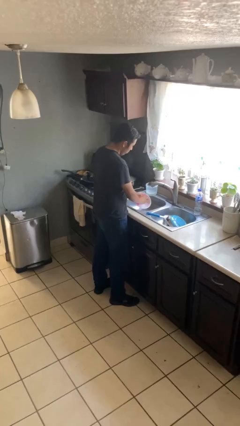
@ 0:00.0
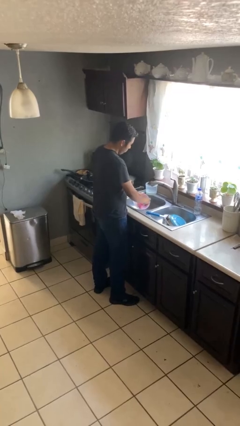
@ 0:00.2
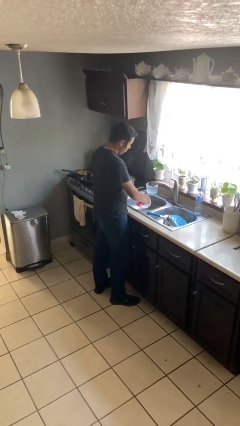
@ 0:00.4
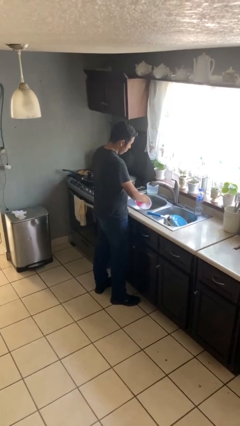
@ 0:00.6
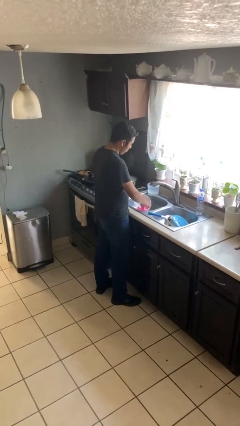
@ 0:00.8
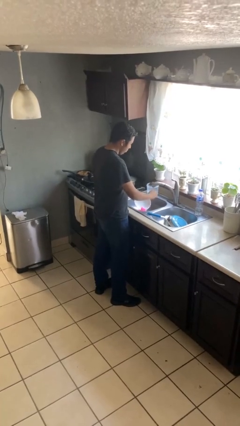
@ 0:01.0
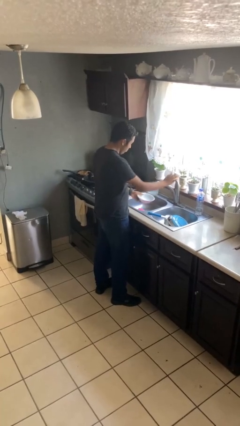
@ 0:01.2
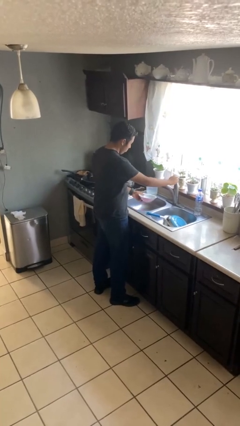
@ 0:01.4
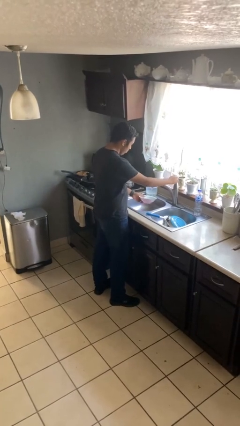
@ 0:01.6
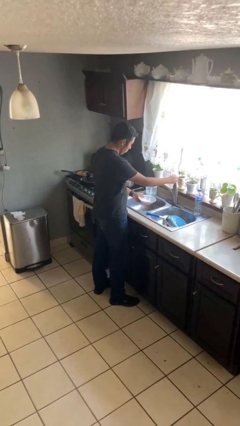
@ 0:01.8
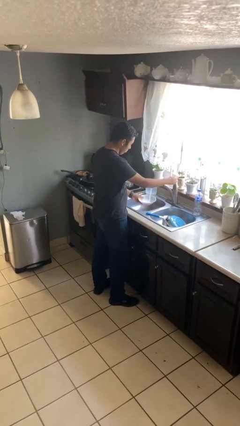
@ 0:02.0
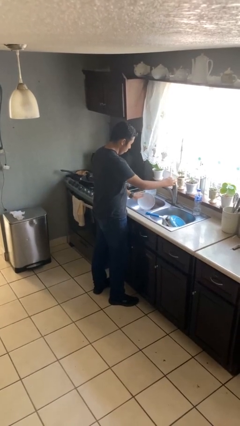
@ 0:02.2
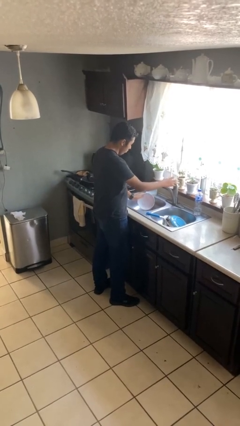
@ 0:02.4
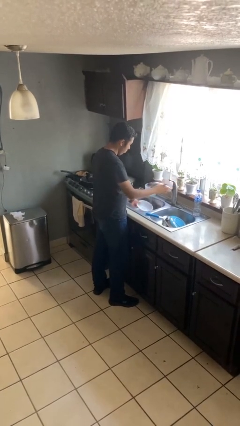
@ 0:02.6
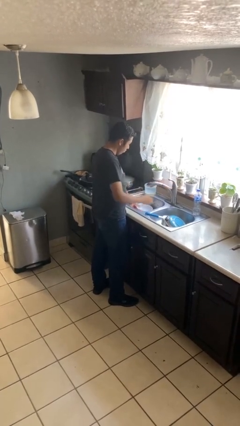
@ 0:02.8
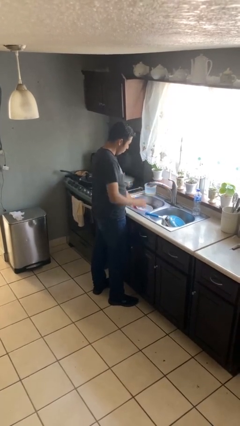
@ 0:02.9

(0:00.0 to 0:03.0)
person washes dish

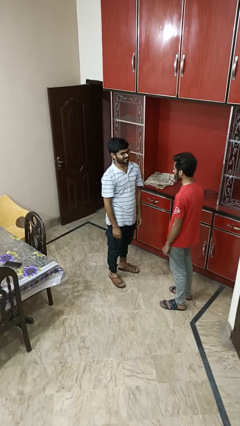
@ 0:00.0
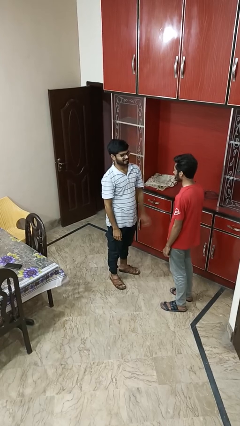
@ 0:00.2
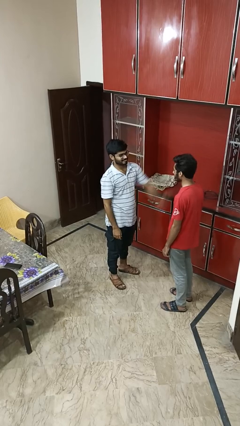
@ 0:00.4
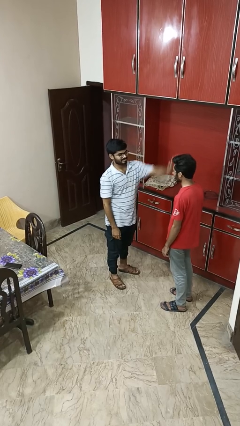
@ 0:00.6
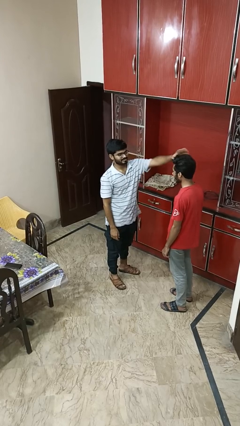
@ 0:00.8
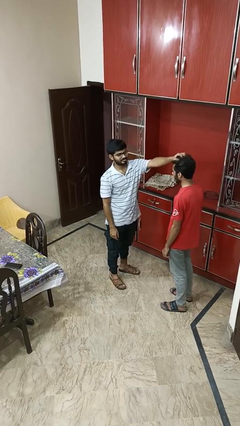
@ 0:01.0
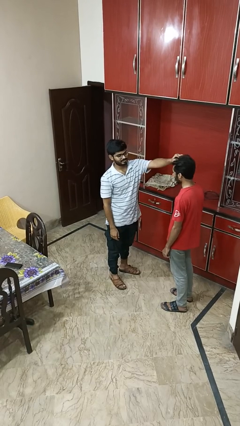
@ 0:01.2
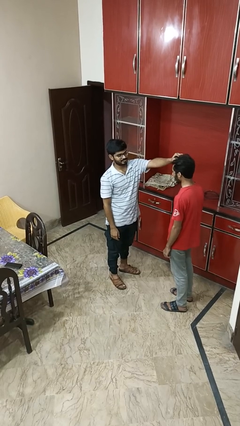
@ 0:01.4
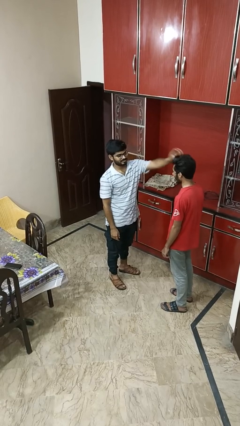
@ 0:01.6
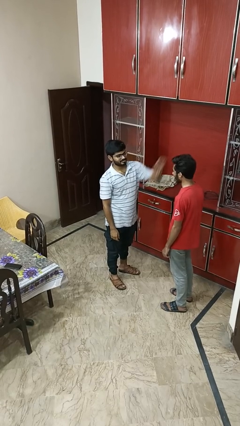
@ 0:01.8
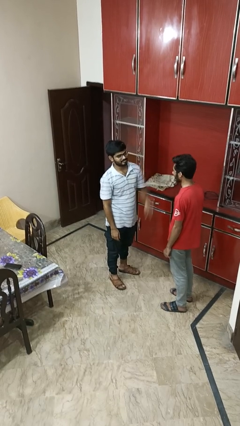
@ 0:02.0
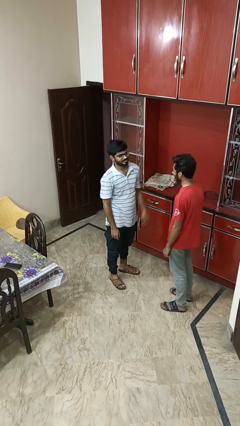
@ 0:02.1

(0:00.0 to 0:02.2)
person grabs person by hair

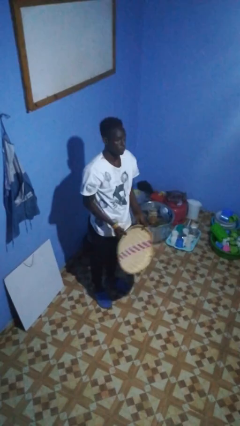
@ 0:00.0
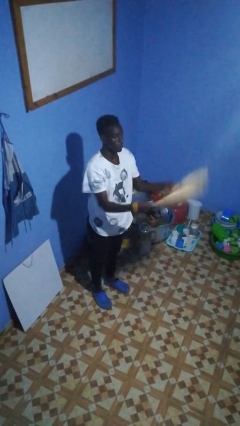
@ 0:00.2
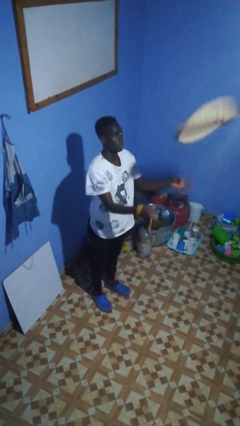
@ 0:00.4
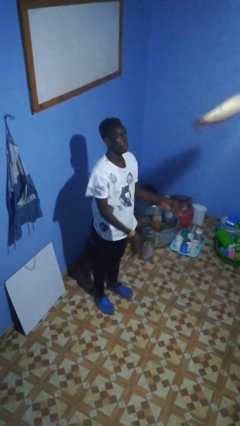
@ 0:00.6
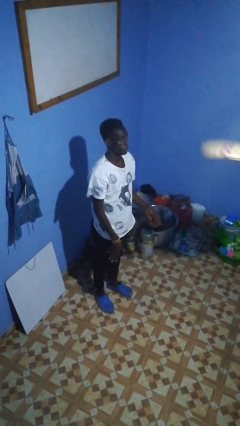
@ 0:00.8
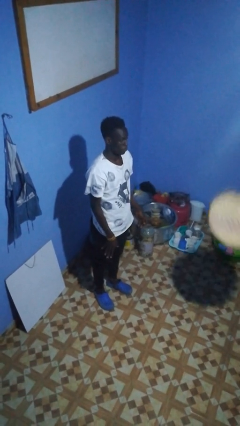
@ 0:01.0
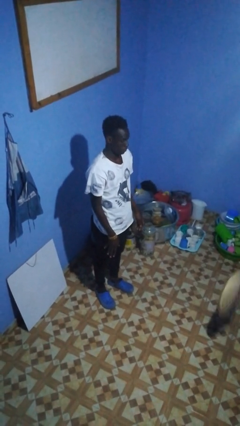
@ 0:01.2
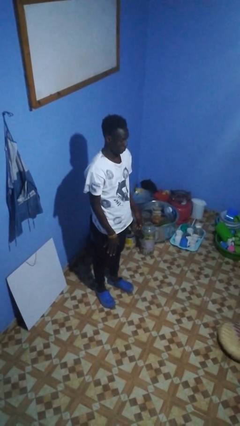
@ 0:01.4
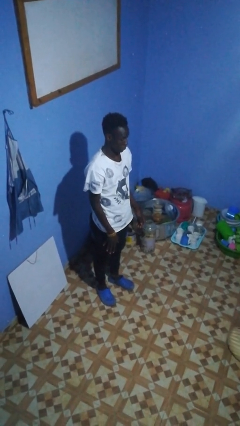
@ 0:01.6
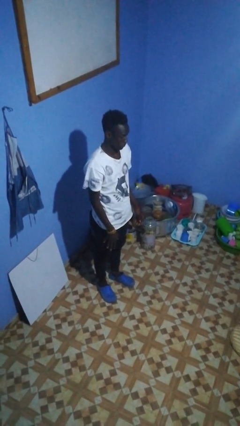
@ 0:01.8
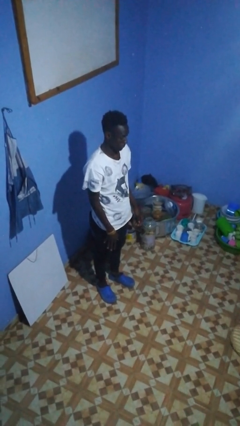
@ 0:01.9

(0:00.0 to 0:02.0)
person throws object into air

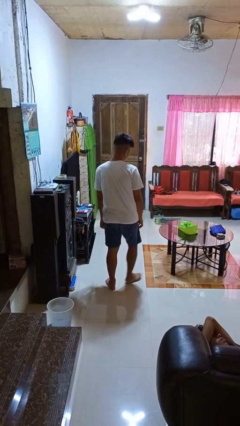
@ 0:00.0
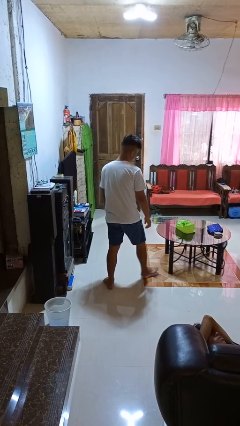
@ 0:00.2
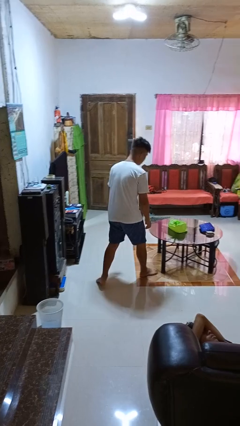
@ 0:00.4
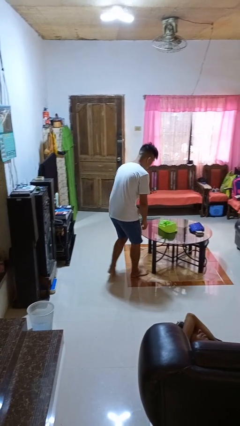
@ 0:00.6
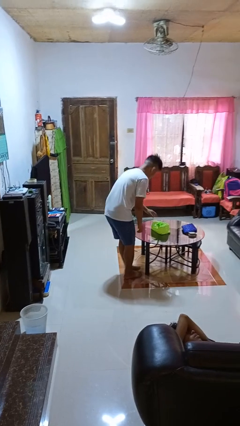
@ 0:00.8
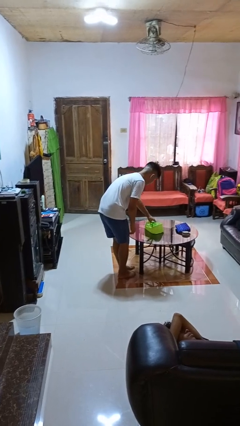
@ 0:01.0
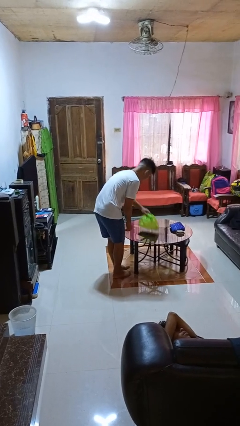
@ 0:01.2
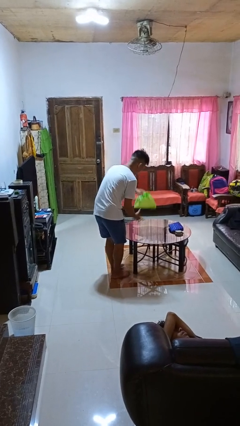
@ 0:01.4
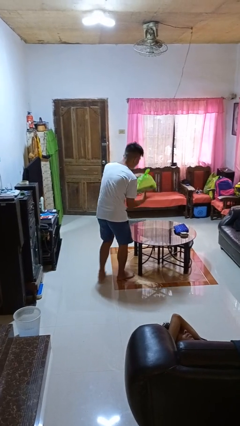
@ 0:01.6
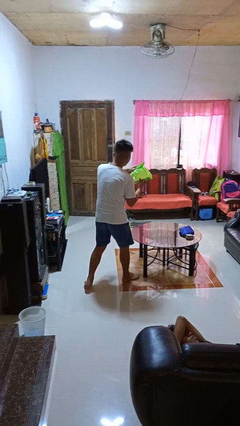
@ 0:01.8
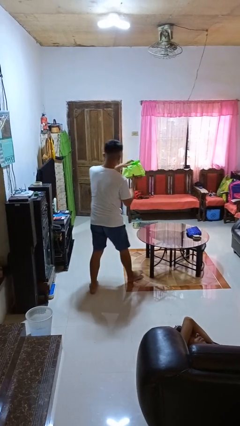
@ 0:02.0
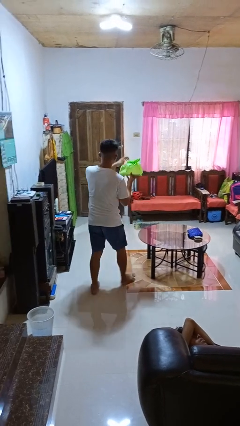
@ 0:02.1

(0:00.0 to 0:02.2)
person picks up object from table

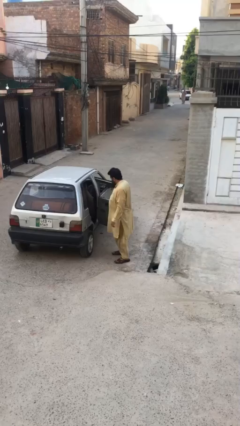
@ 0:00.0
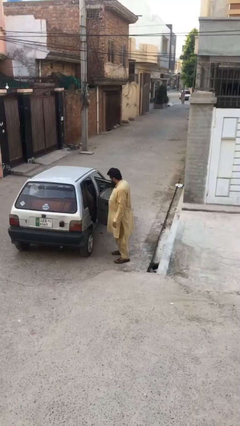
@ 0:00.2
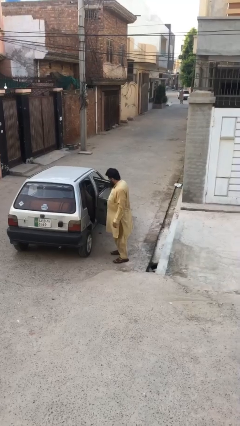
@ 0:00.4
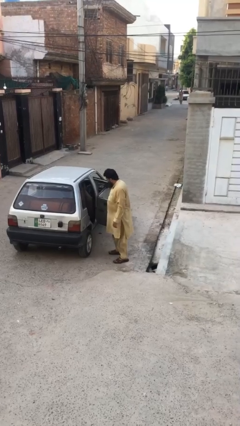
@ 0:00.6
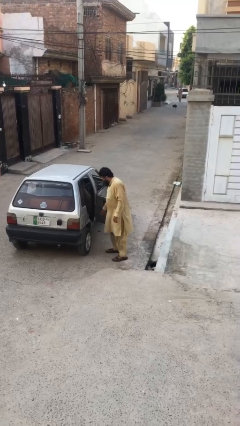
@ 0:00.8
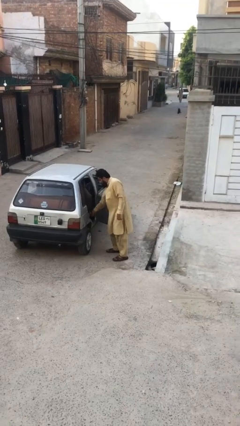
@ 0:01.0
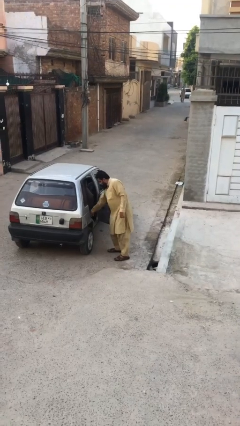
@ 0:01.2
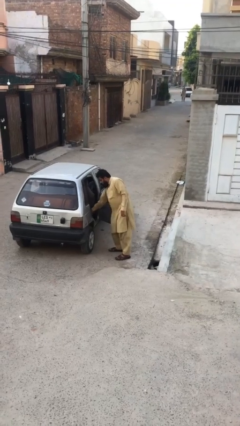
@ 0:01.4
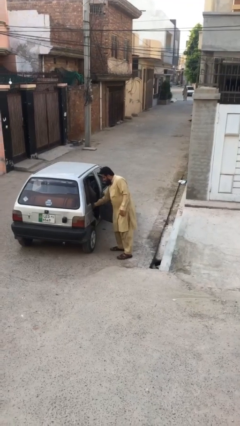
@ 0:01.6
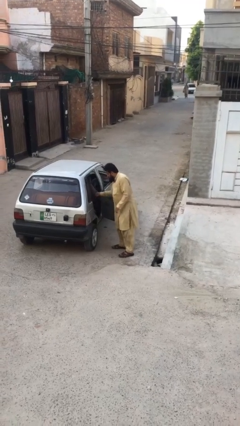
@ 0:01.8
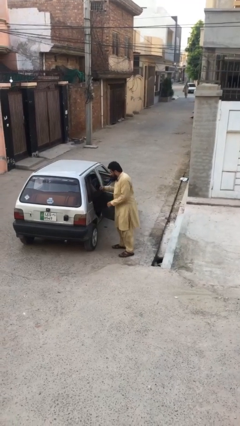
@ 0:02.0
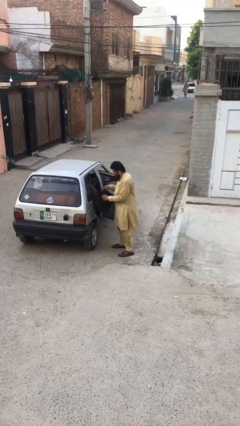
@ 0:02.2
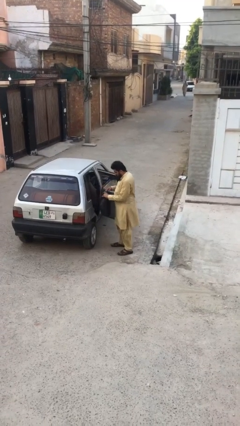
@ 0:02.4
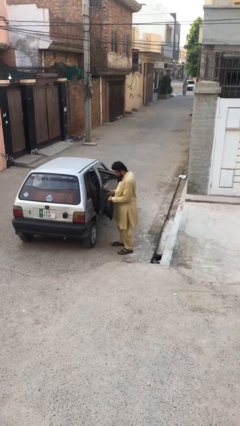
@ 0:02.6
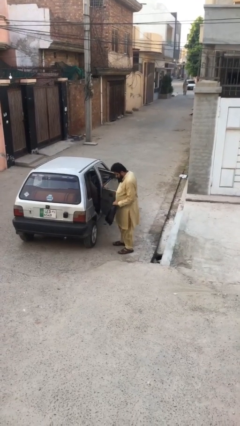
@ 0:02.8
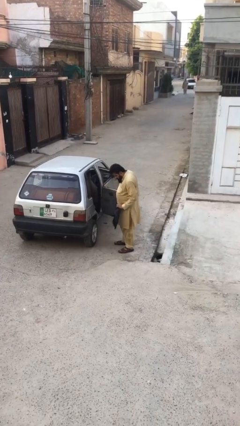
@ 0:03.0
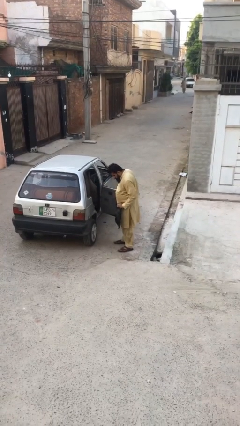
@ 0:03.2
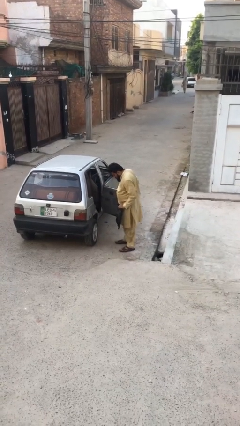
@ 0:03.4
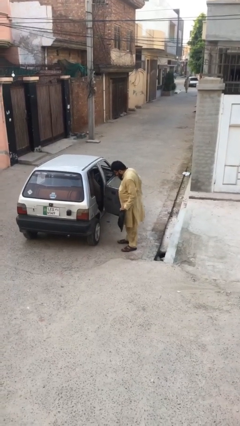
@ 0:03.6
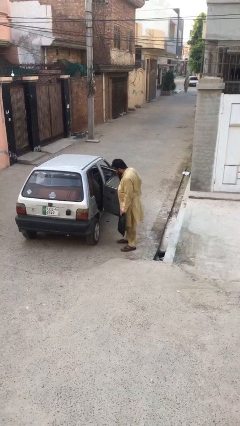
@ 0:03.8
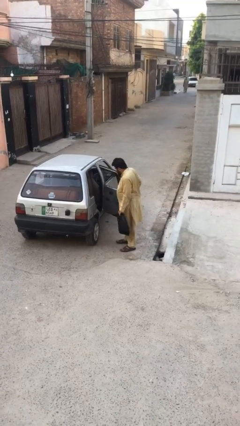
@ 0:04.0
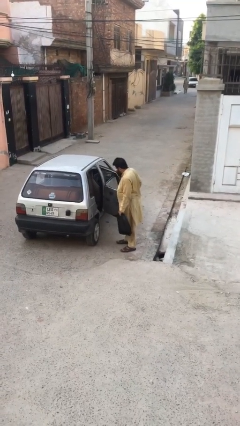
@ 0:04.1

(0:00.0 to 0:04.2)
person unloads car

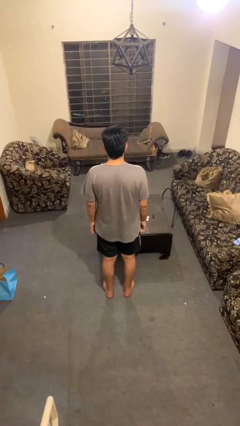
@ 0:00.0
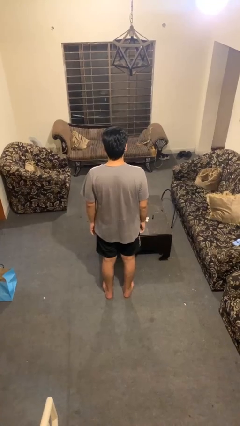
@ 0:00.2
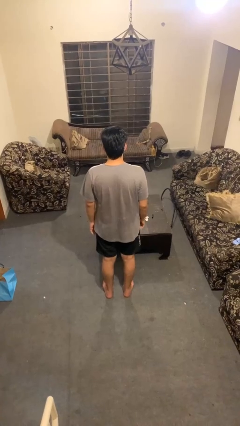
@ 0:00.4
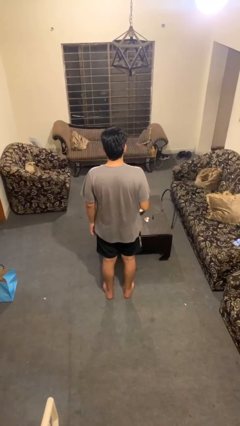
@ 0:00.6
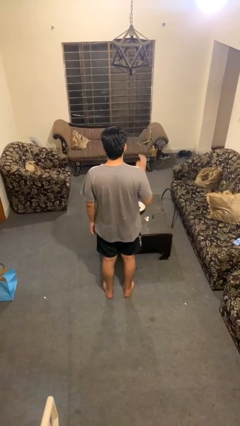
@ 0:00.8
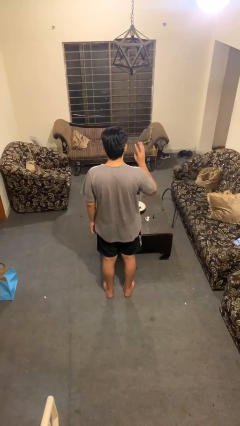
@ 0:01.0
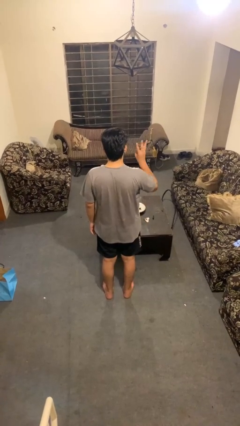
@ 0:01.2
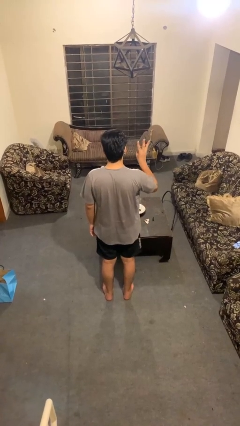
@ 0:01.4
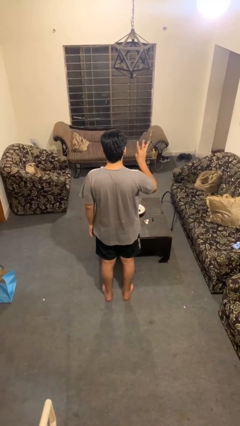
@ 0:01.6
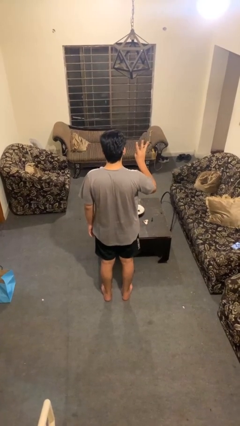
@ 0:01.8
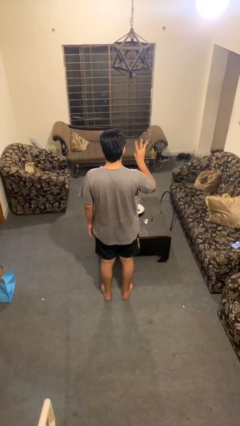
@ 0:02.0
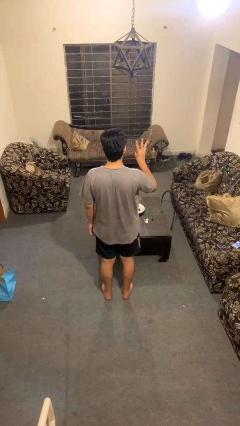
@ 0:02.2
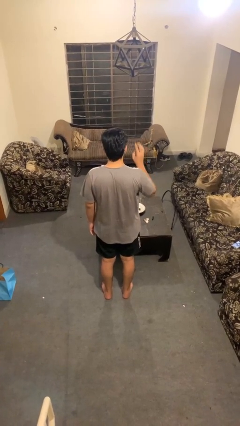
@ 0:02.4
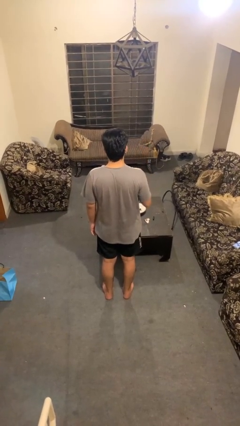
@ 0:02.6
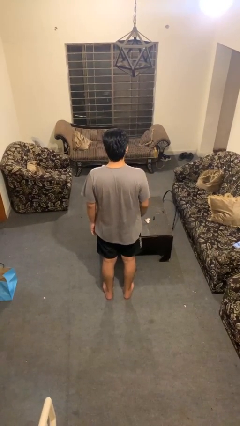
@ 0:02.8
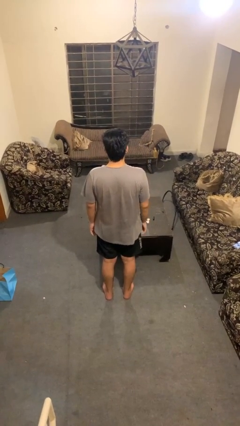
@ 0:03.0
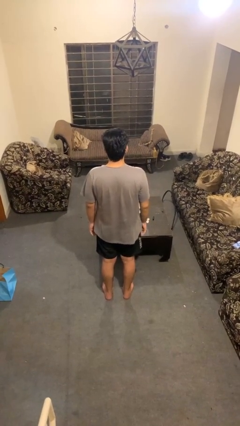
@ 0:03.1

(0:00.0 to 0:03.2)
person gestures number three

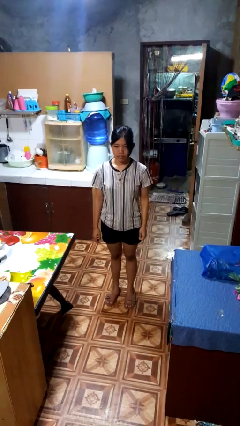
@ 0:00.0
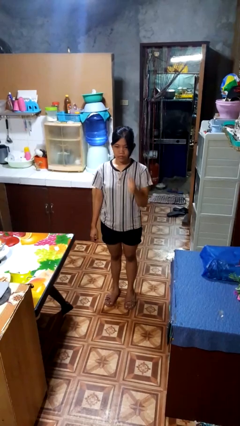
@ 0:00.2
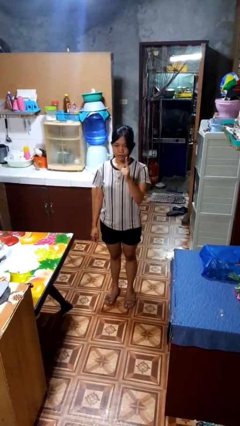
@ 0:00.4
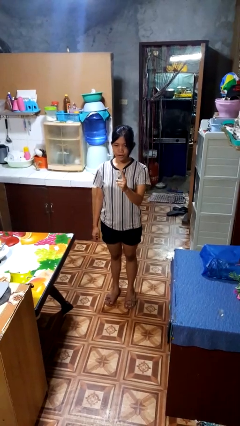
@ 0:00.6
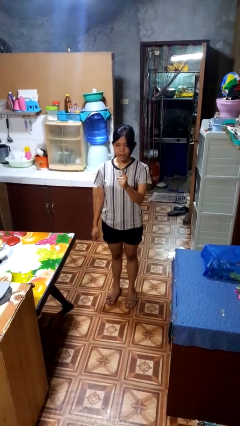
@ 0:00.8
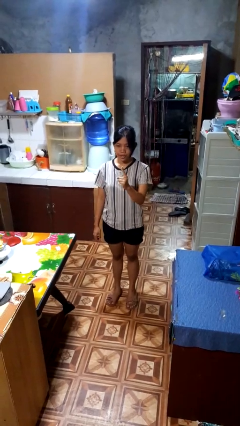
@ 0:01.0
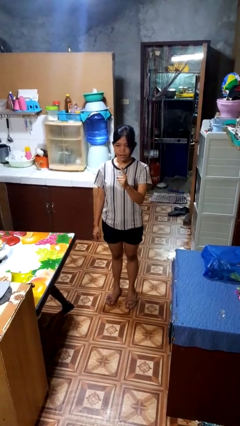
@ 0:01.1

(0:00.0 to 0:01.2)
person gestures number one
